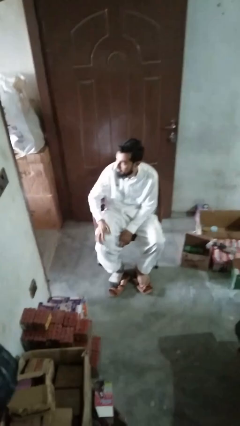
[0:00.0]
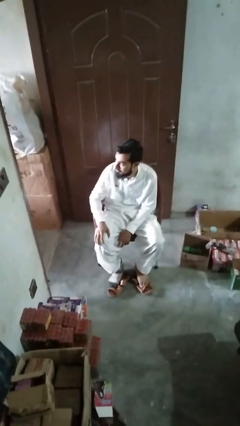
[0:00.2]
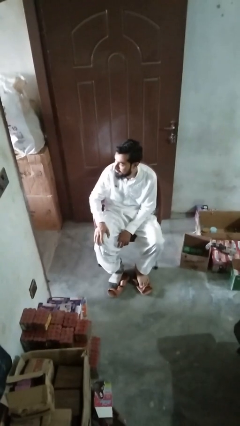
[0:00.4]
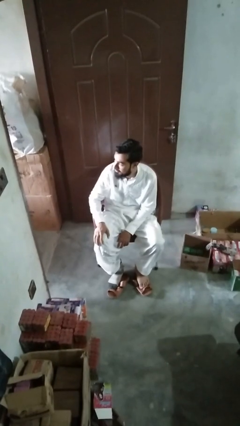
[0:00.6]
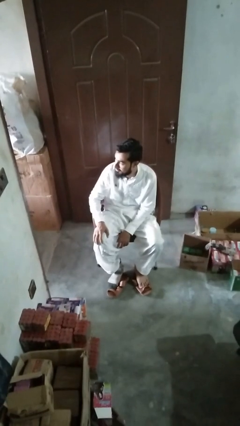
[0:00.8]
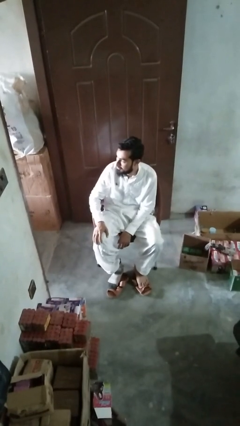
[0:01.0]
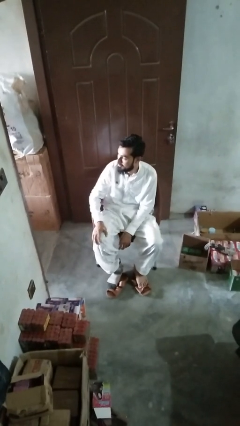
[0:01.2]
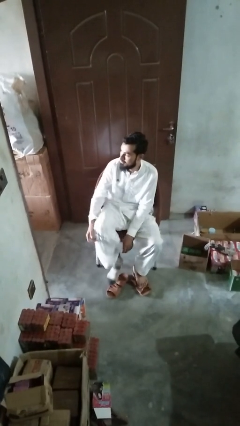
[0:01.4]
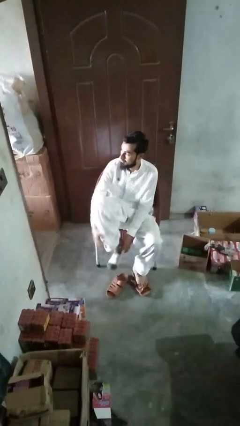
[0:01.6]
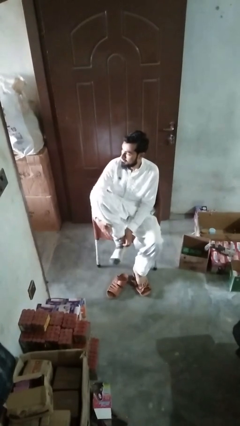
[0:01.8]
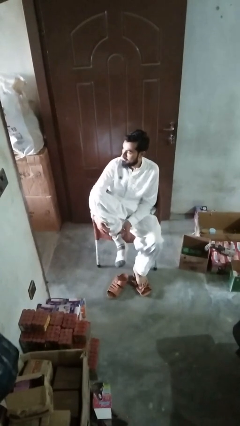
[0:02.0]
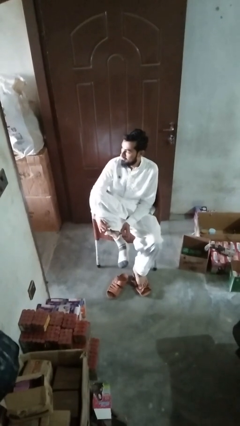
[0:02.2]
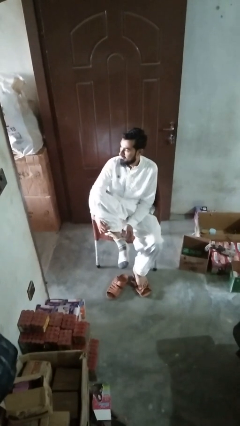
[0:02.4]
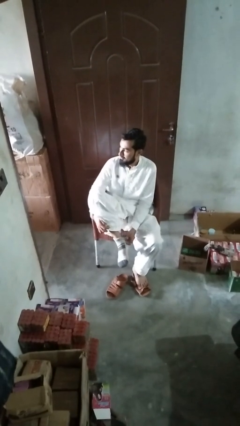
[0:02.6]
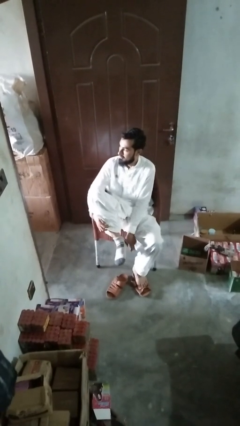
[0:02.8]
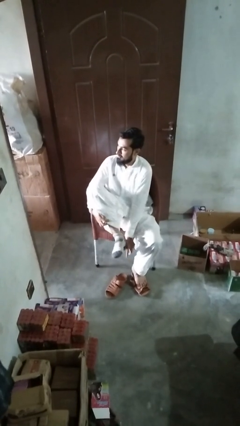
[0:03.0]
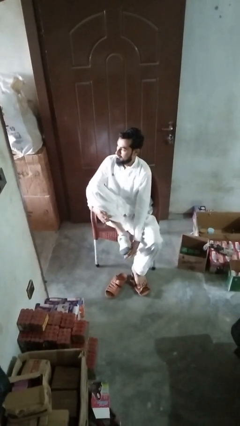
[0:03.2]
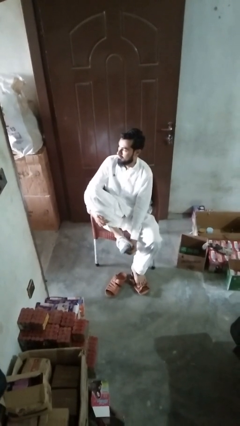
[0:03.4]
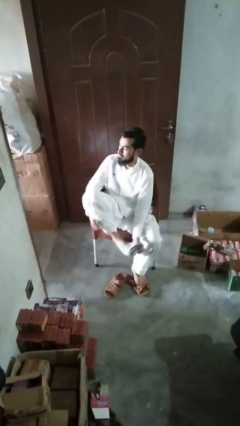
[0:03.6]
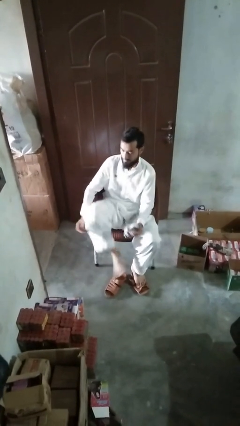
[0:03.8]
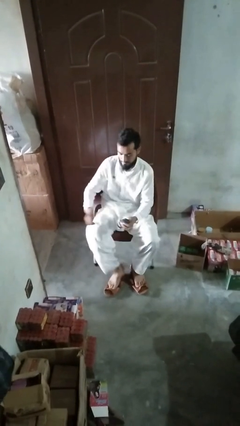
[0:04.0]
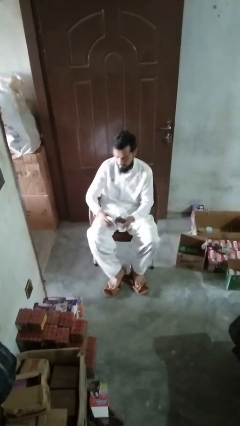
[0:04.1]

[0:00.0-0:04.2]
person takes off socks

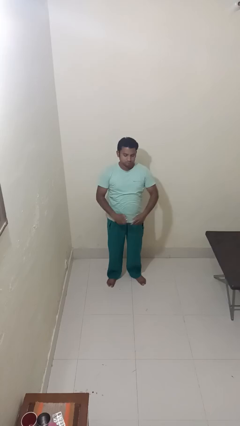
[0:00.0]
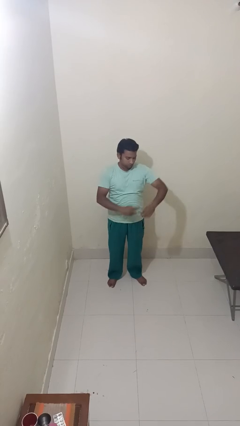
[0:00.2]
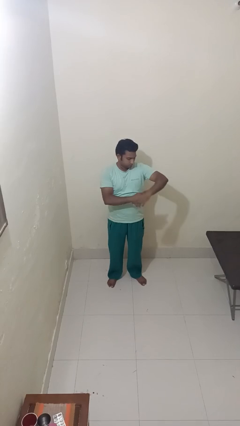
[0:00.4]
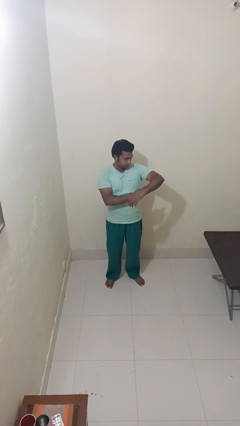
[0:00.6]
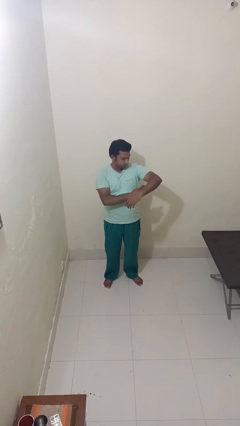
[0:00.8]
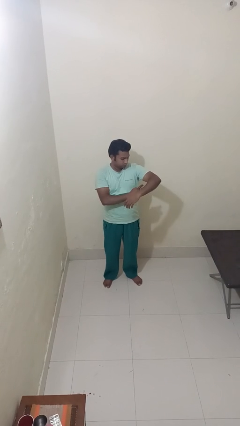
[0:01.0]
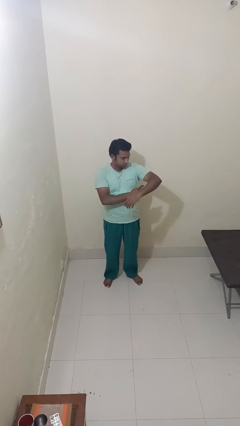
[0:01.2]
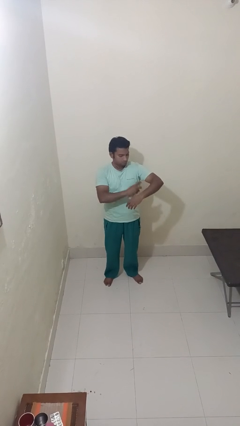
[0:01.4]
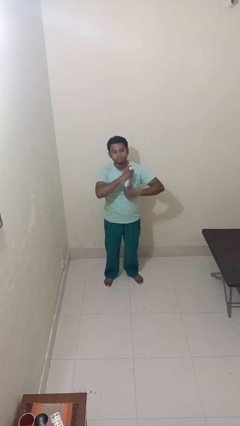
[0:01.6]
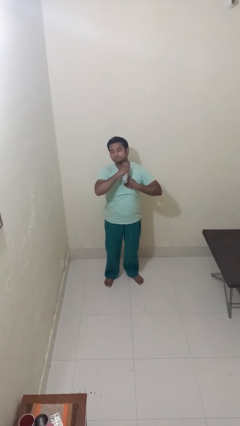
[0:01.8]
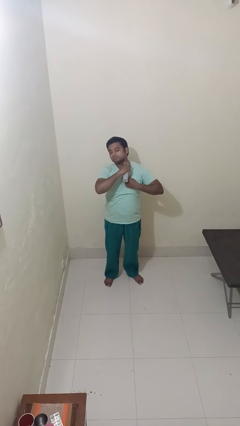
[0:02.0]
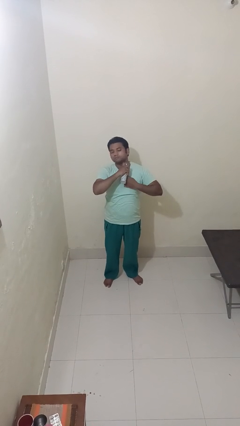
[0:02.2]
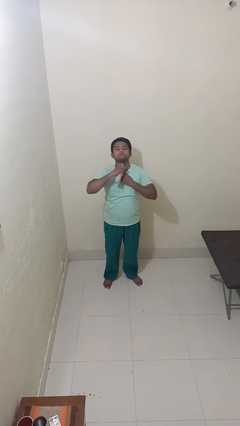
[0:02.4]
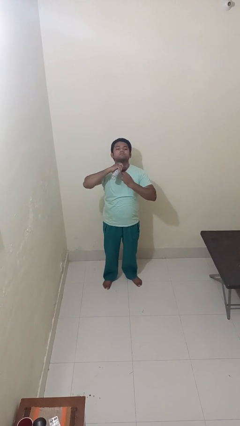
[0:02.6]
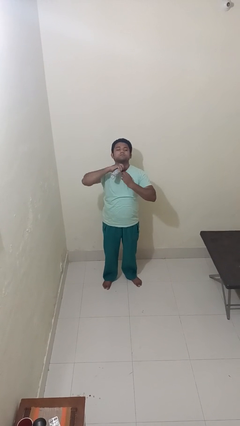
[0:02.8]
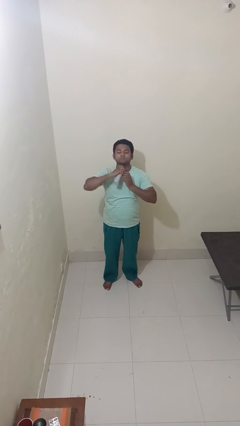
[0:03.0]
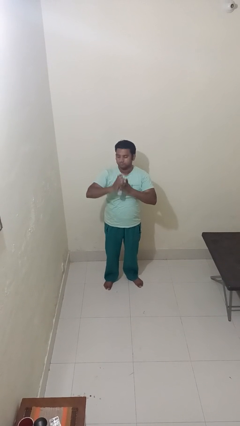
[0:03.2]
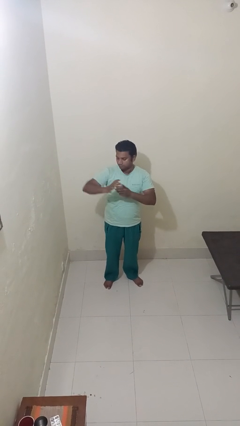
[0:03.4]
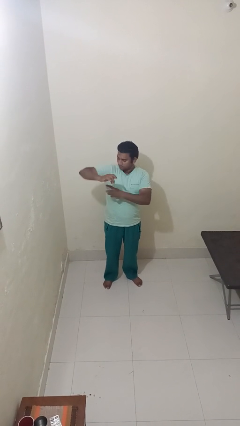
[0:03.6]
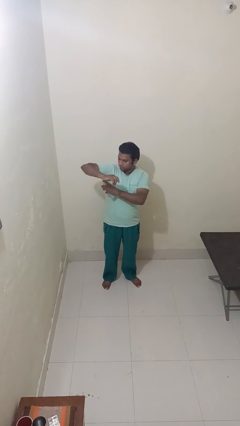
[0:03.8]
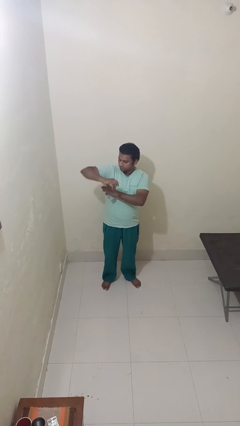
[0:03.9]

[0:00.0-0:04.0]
person applies deodorant

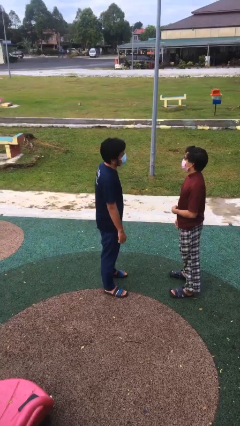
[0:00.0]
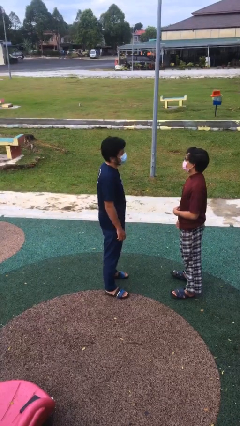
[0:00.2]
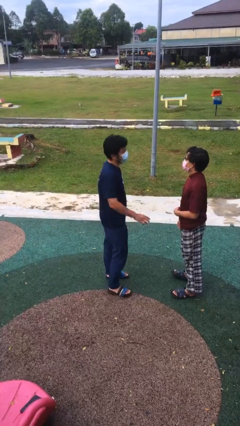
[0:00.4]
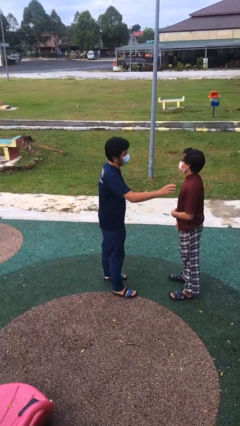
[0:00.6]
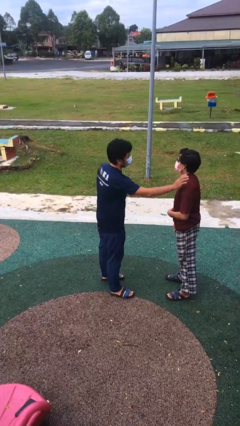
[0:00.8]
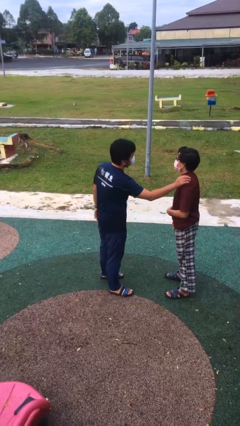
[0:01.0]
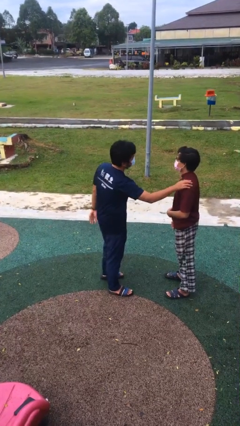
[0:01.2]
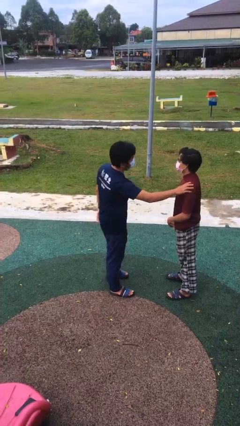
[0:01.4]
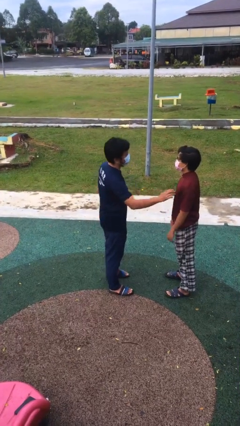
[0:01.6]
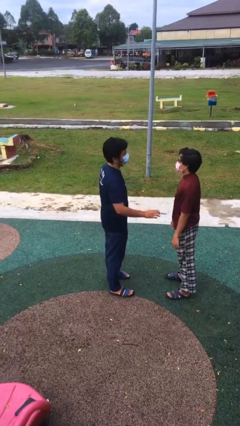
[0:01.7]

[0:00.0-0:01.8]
person pounds shoulders of person

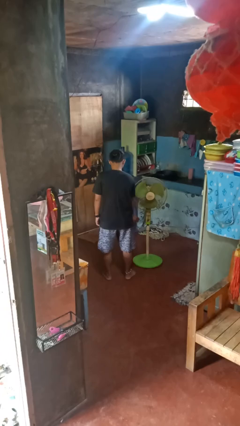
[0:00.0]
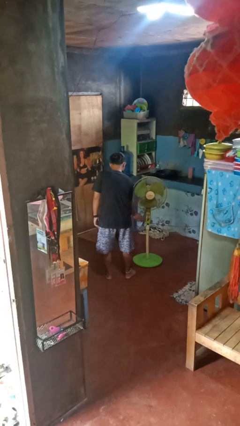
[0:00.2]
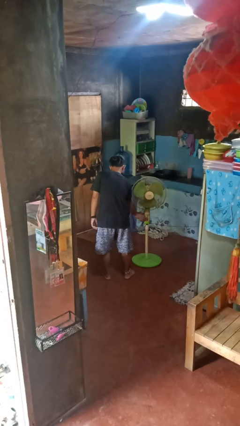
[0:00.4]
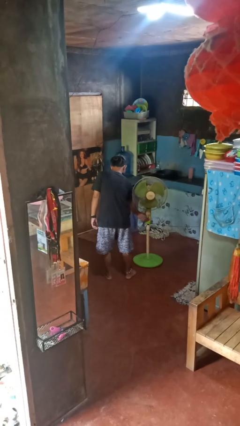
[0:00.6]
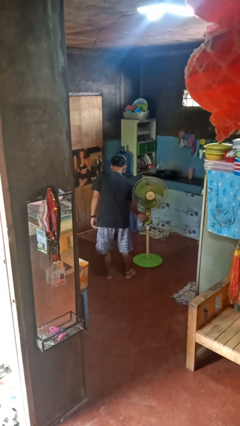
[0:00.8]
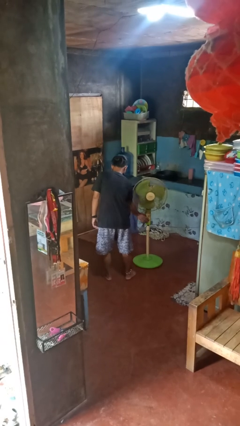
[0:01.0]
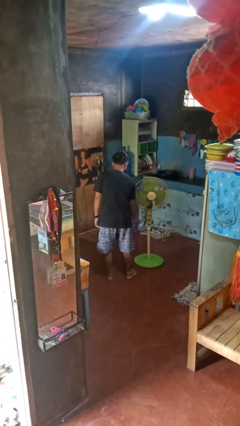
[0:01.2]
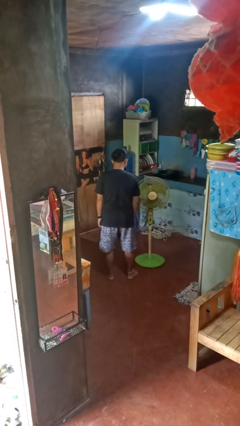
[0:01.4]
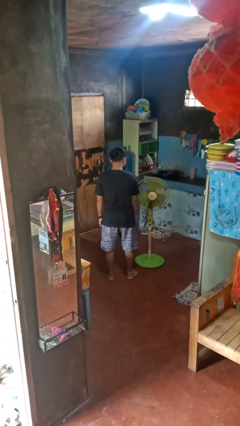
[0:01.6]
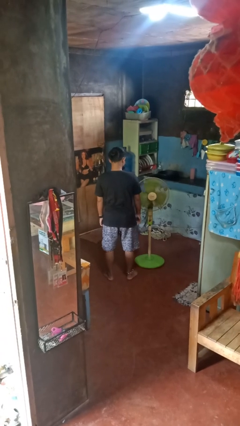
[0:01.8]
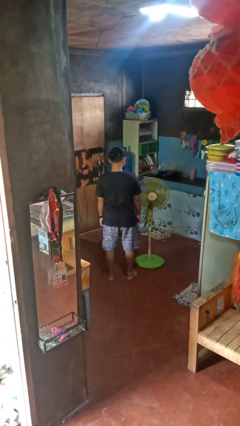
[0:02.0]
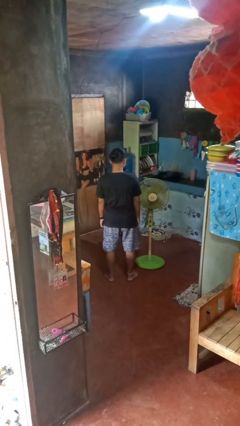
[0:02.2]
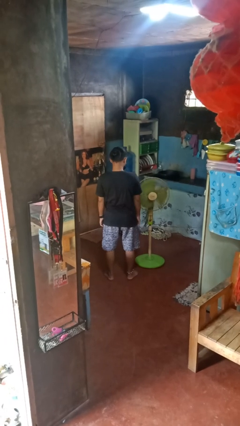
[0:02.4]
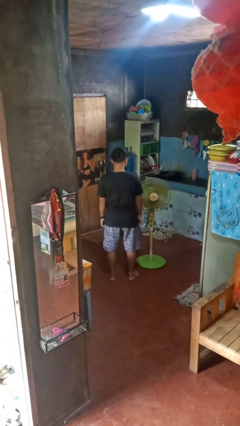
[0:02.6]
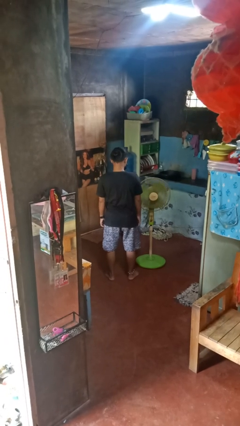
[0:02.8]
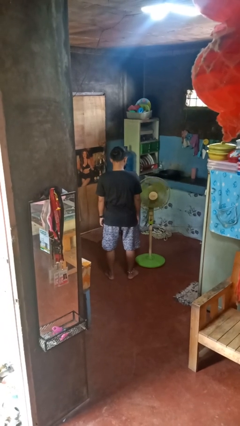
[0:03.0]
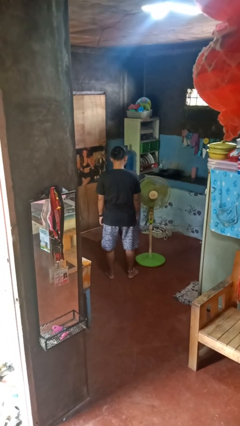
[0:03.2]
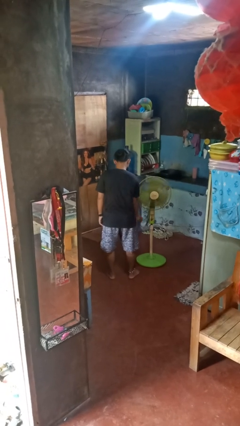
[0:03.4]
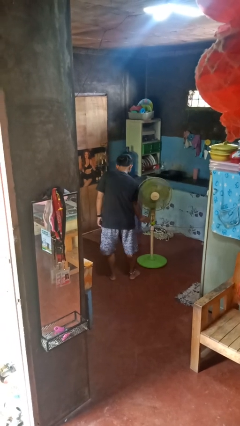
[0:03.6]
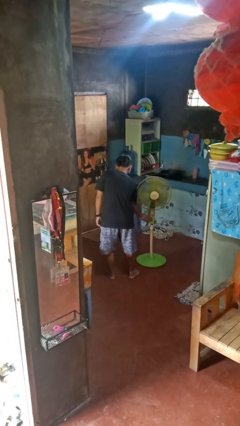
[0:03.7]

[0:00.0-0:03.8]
person turns on fan

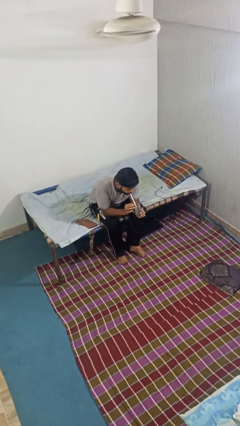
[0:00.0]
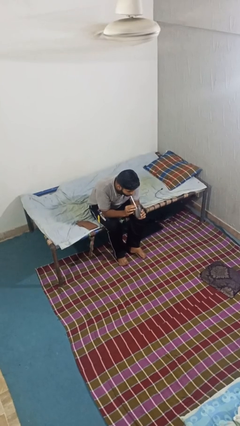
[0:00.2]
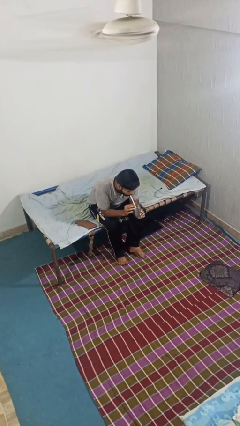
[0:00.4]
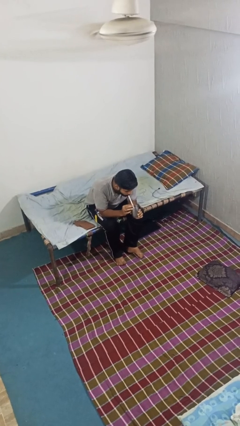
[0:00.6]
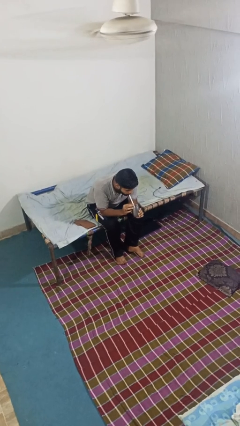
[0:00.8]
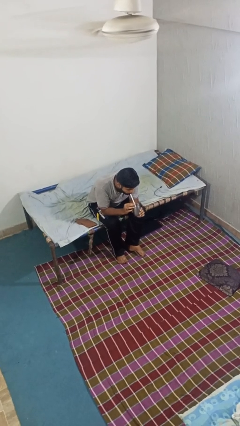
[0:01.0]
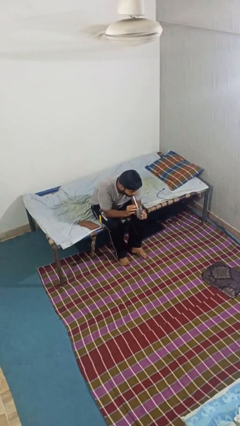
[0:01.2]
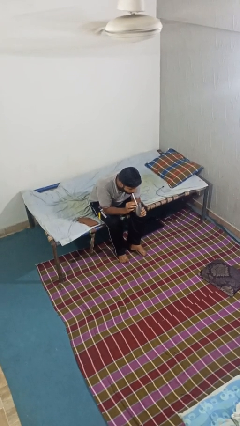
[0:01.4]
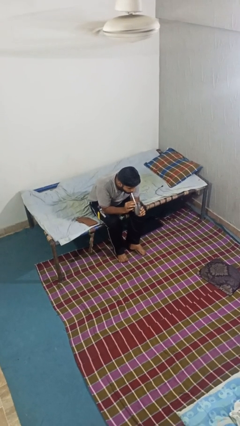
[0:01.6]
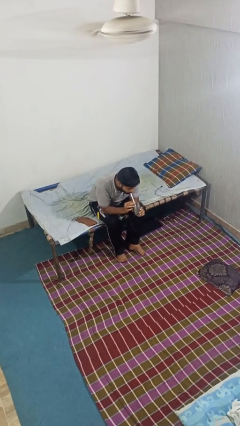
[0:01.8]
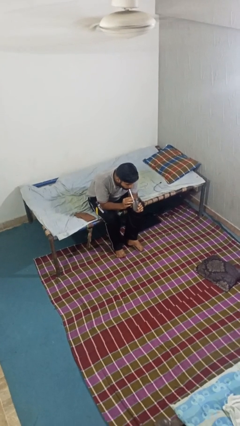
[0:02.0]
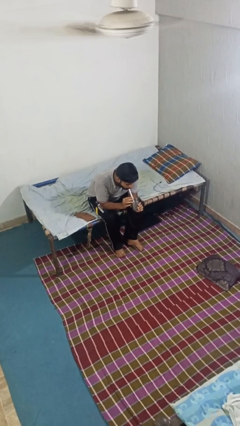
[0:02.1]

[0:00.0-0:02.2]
person drinks from straw

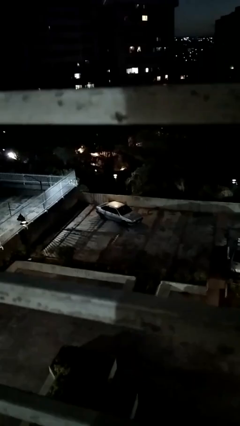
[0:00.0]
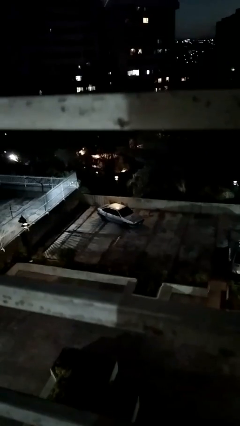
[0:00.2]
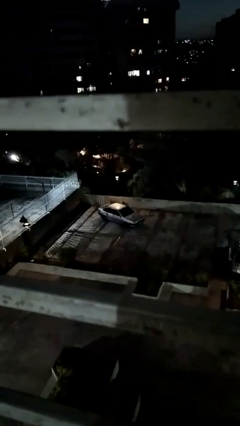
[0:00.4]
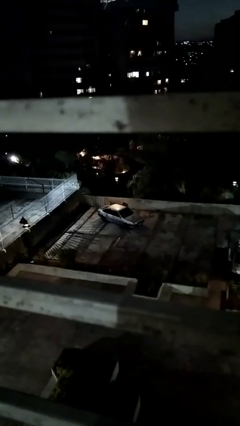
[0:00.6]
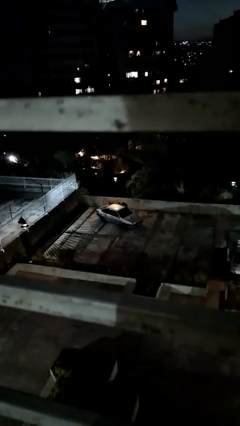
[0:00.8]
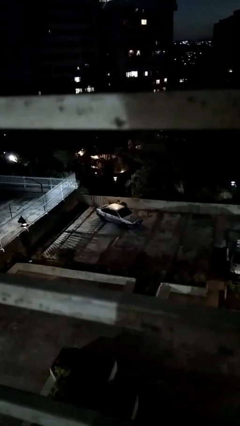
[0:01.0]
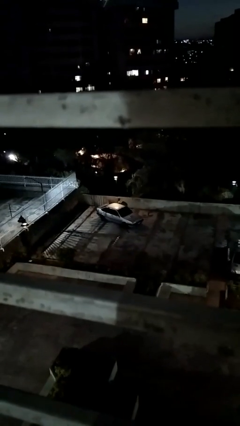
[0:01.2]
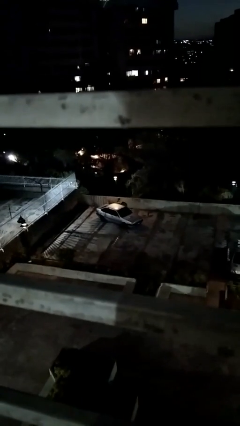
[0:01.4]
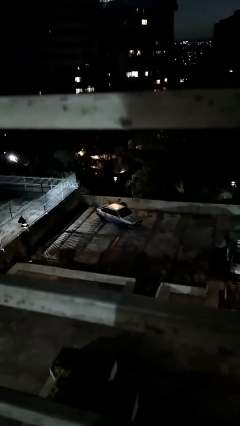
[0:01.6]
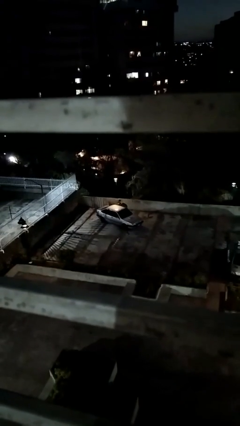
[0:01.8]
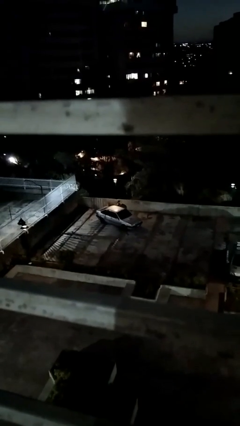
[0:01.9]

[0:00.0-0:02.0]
car drops off person
